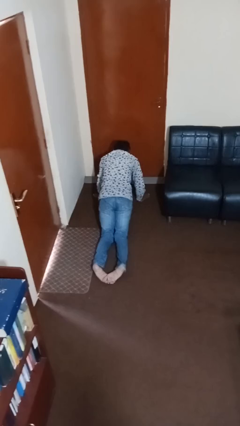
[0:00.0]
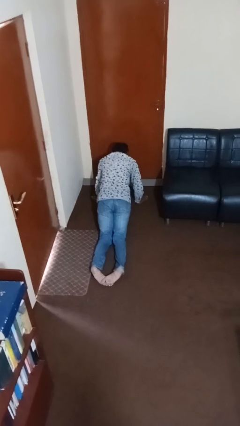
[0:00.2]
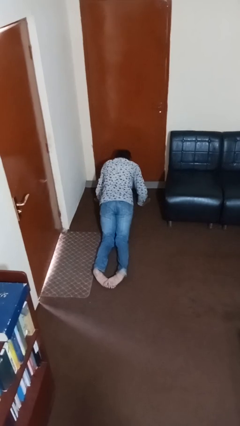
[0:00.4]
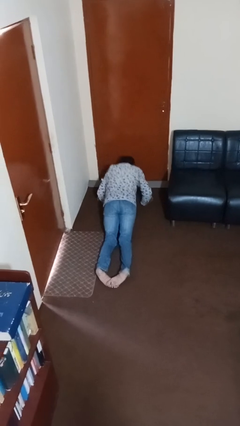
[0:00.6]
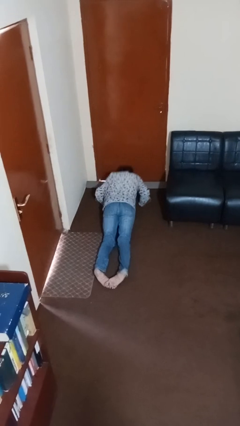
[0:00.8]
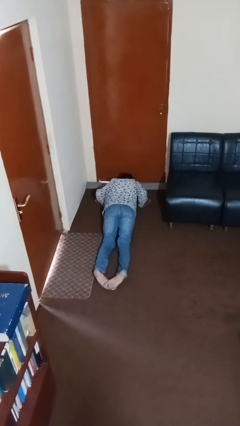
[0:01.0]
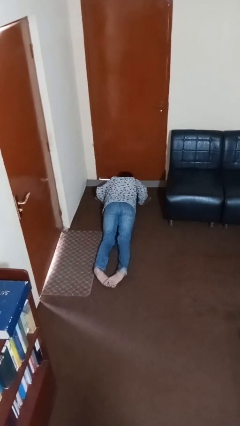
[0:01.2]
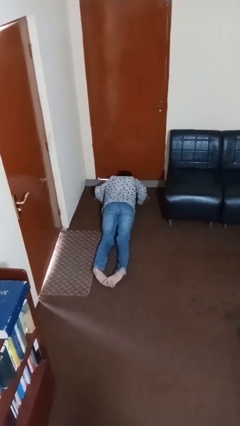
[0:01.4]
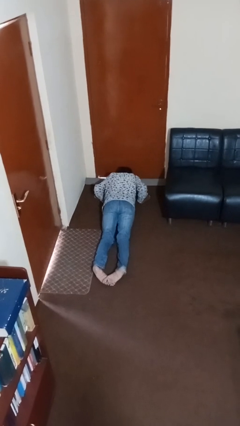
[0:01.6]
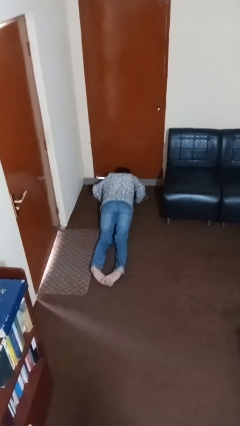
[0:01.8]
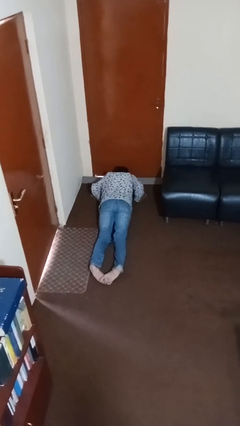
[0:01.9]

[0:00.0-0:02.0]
person exercises with pushup

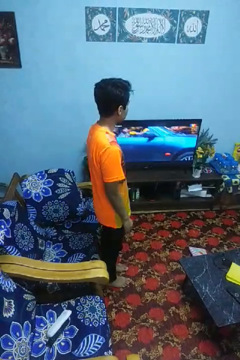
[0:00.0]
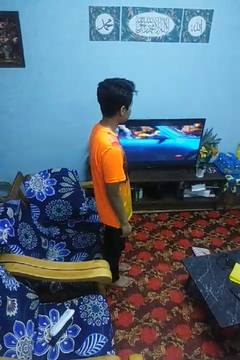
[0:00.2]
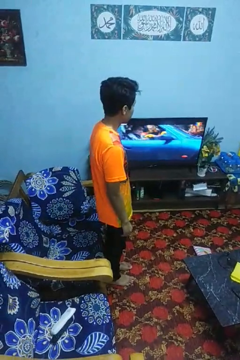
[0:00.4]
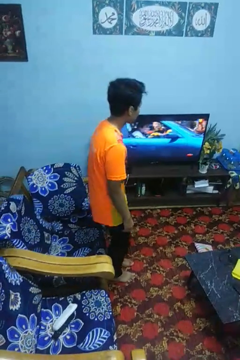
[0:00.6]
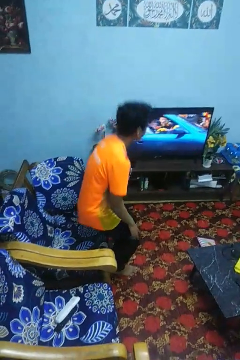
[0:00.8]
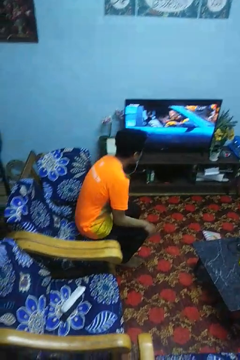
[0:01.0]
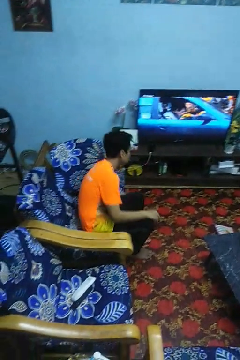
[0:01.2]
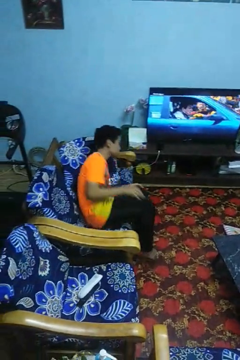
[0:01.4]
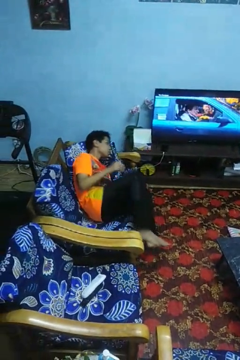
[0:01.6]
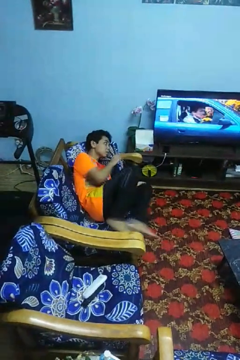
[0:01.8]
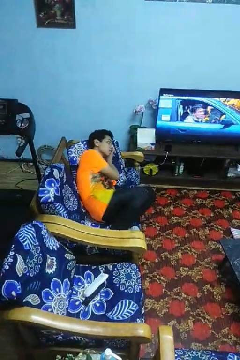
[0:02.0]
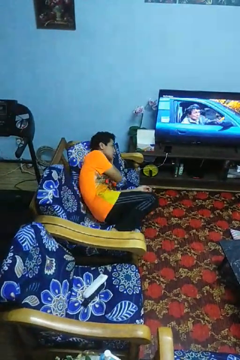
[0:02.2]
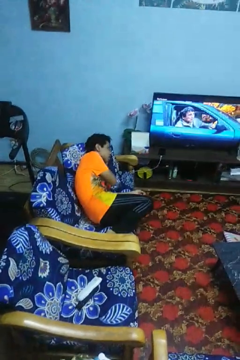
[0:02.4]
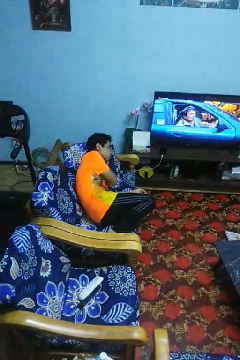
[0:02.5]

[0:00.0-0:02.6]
person lies down on couch

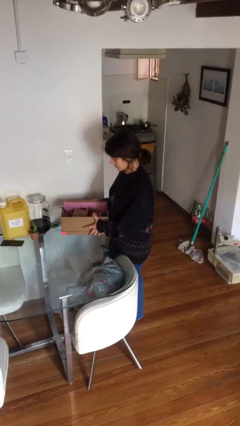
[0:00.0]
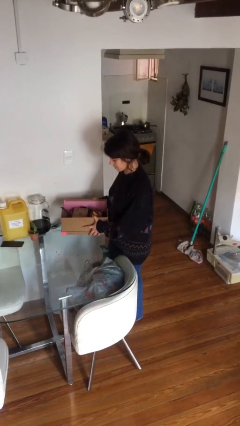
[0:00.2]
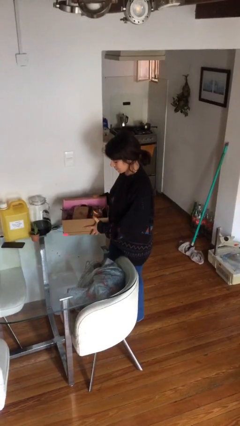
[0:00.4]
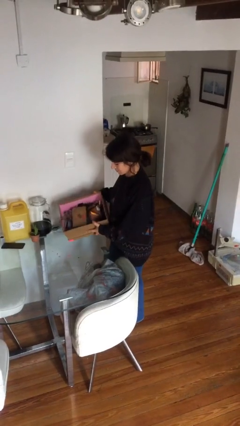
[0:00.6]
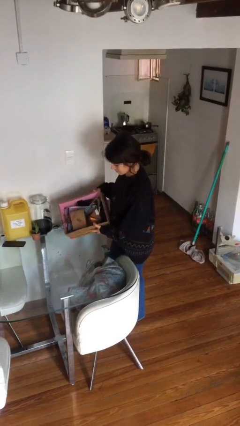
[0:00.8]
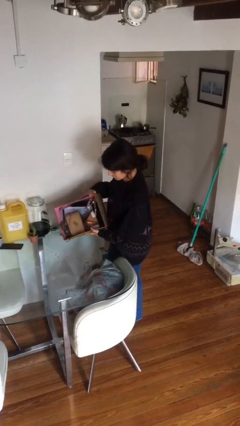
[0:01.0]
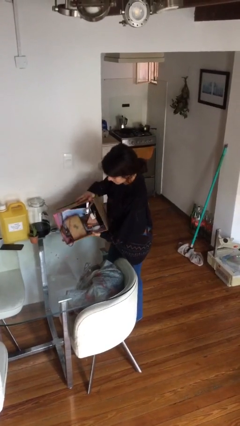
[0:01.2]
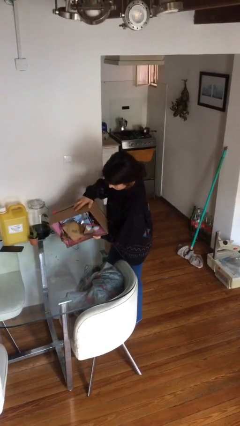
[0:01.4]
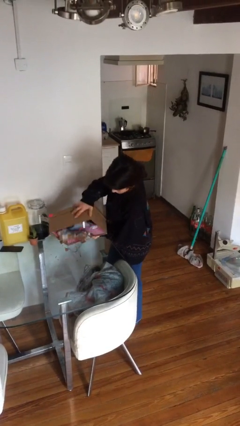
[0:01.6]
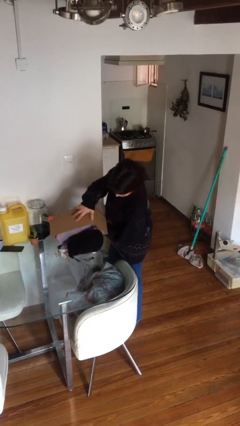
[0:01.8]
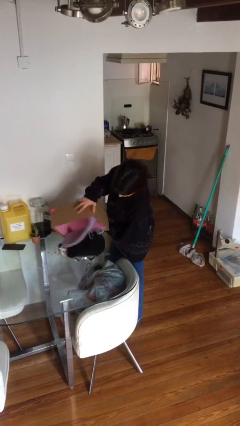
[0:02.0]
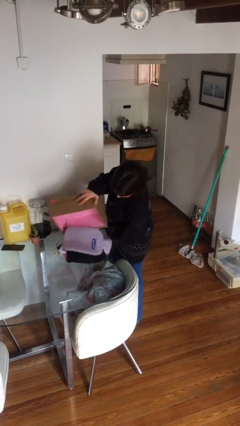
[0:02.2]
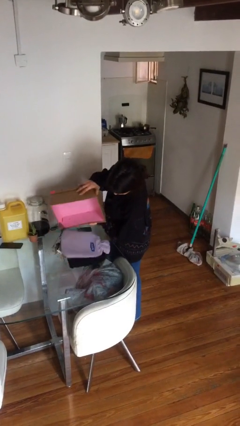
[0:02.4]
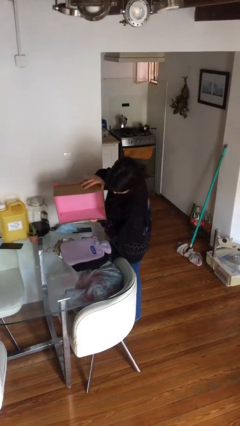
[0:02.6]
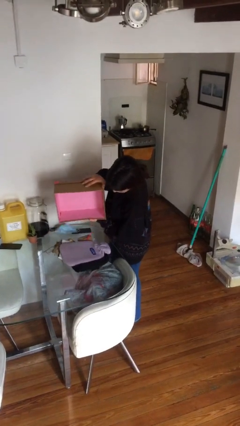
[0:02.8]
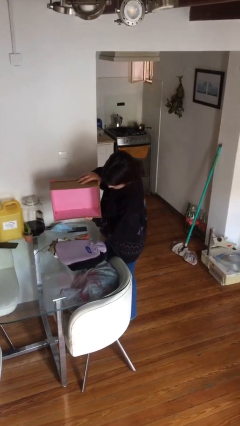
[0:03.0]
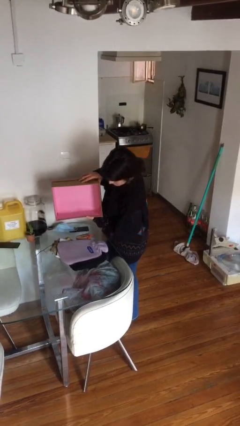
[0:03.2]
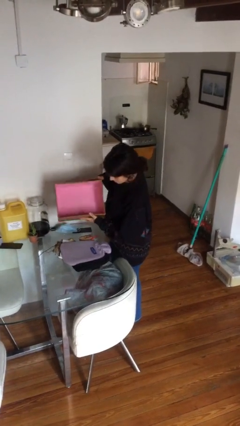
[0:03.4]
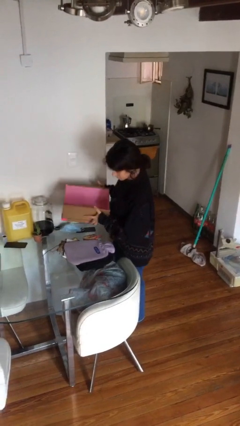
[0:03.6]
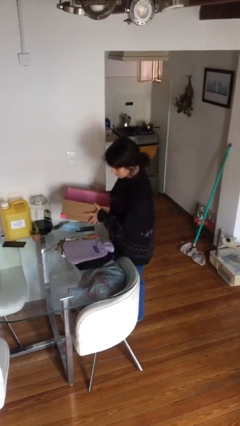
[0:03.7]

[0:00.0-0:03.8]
person unloads box onto table

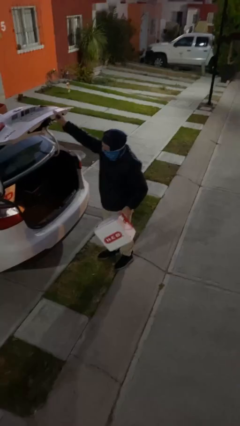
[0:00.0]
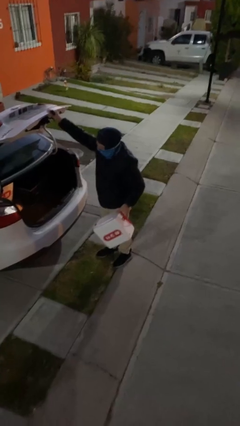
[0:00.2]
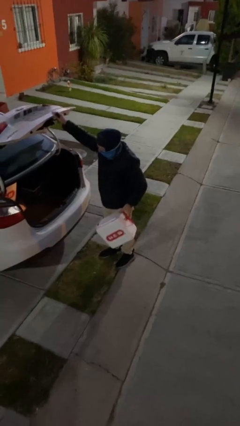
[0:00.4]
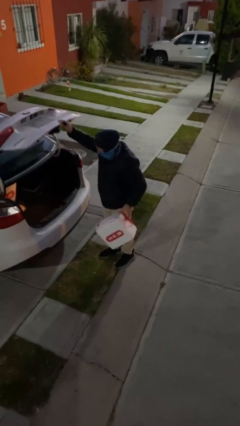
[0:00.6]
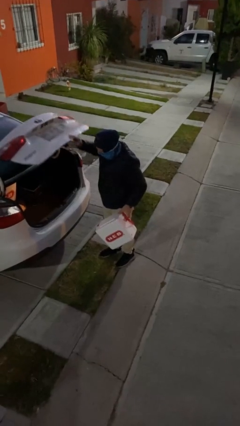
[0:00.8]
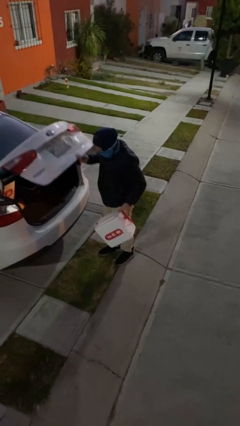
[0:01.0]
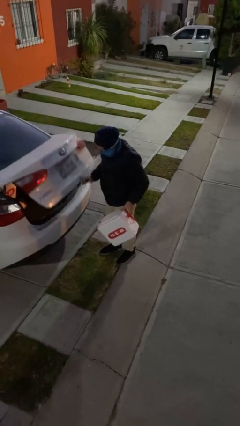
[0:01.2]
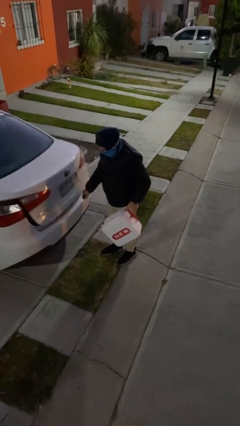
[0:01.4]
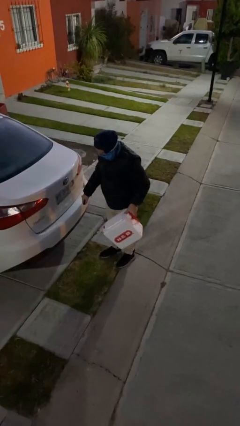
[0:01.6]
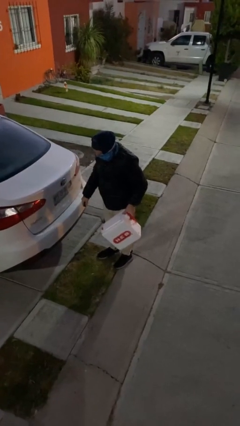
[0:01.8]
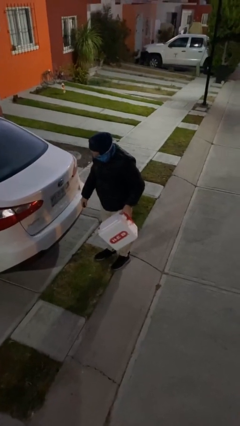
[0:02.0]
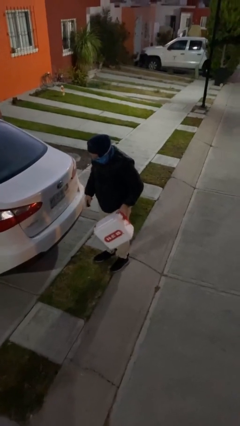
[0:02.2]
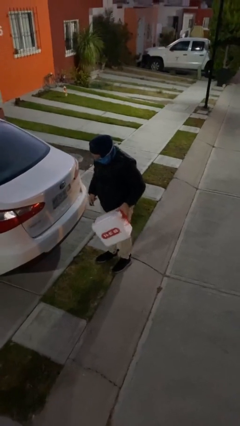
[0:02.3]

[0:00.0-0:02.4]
person closes car trunk

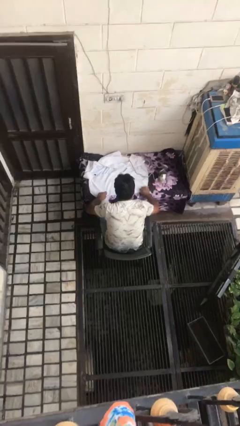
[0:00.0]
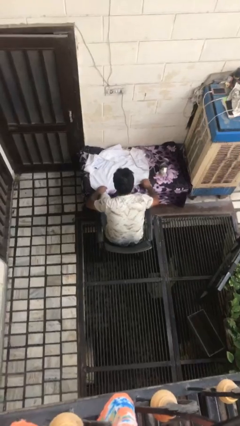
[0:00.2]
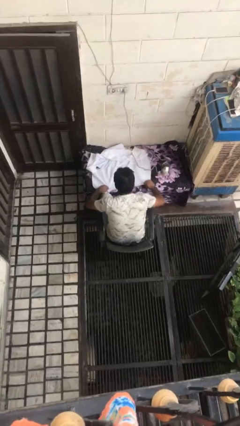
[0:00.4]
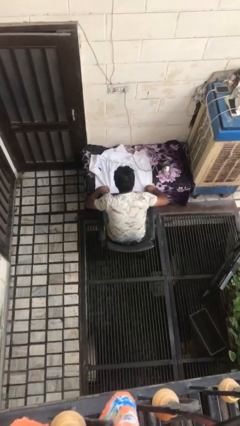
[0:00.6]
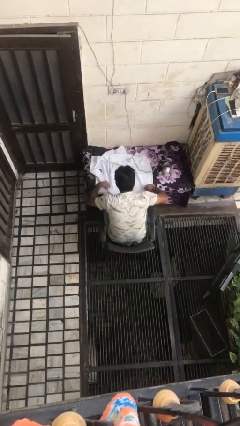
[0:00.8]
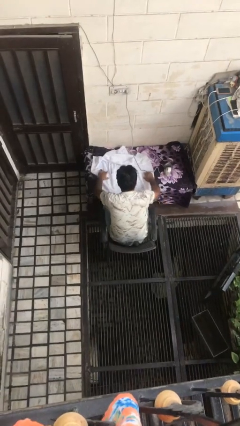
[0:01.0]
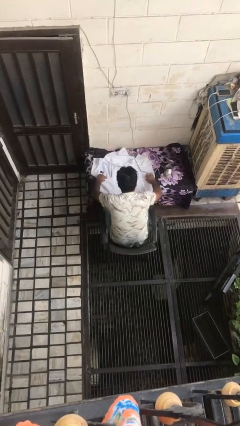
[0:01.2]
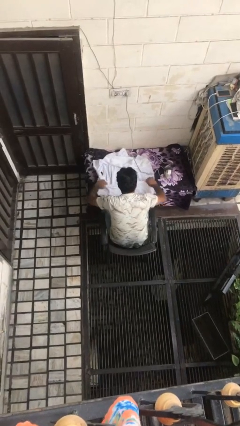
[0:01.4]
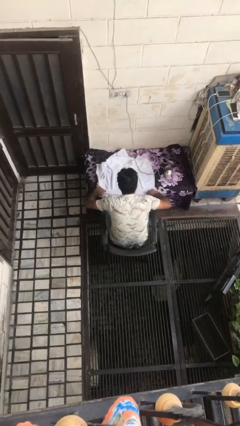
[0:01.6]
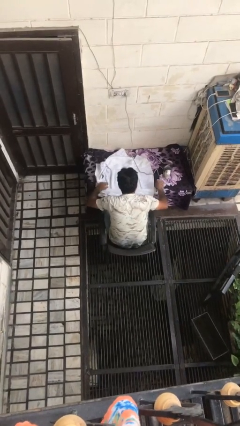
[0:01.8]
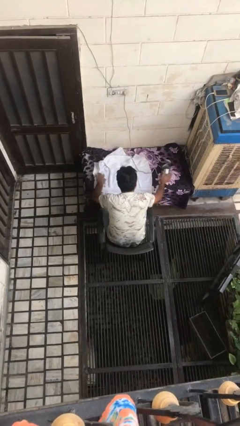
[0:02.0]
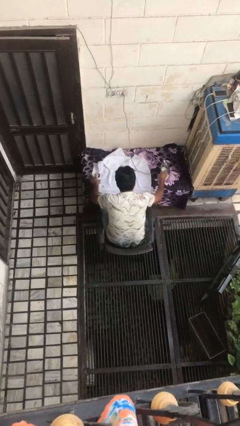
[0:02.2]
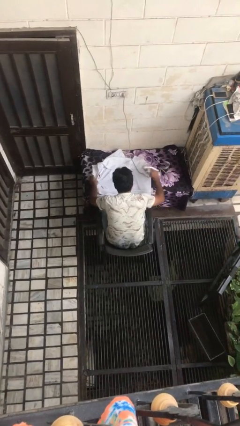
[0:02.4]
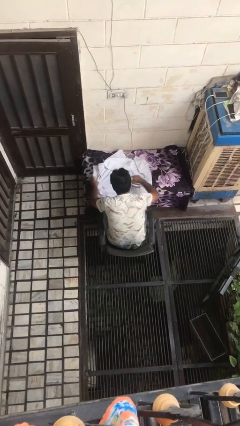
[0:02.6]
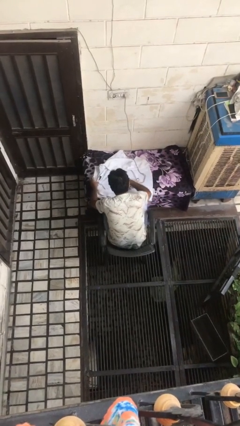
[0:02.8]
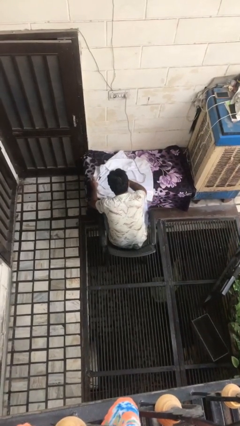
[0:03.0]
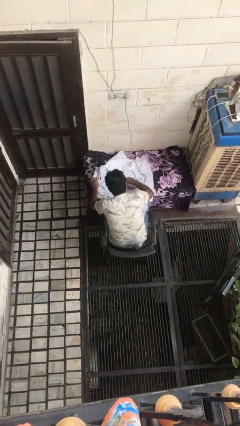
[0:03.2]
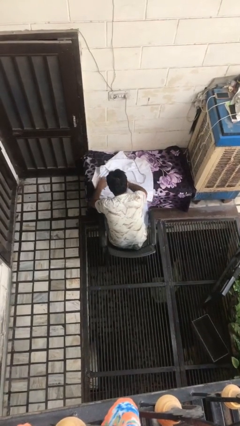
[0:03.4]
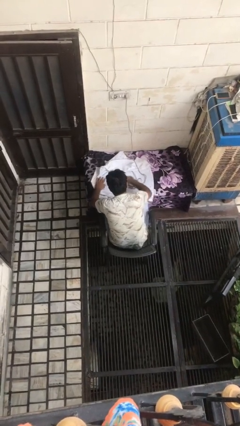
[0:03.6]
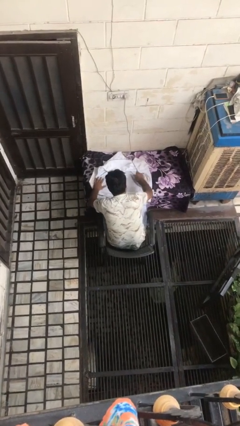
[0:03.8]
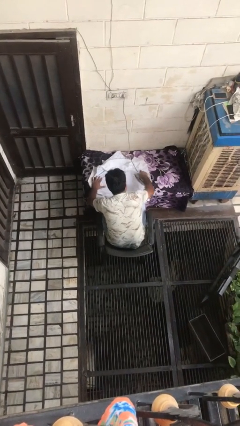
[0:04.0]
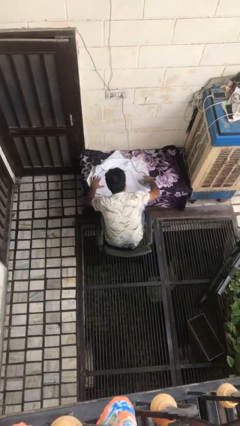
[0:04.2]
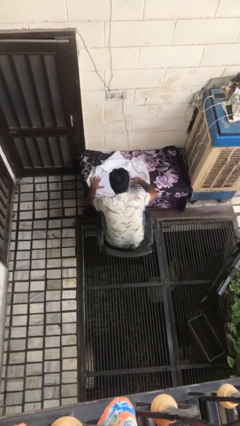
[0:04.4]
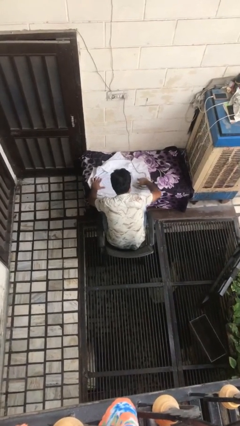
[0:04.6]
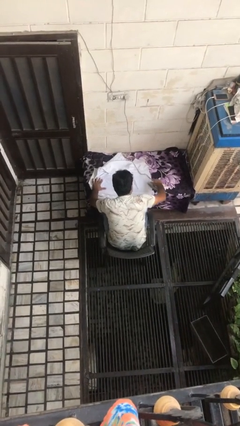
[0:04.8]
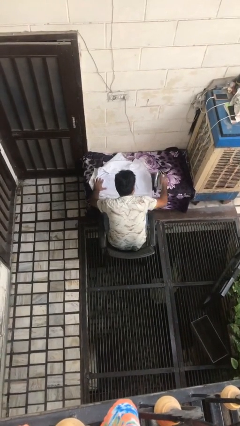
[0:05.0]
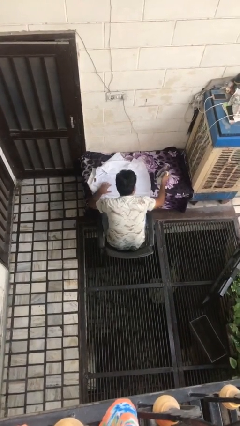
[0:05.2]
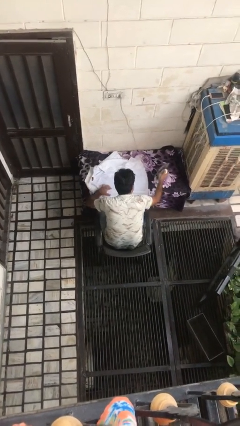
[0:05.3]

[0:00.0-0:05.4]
person irons clothes

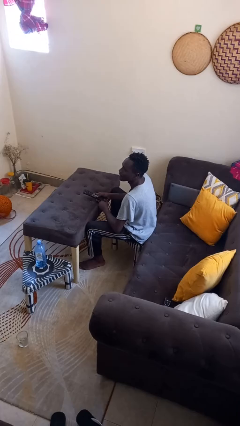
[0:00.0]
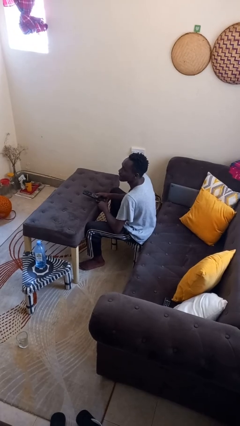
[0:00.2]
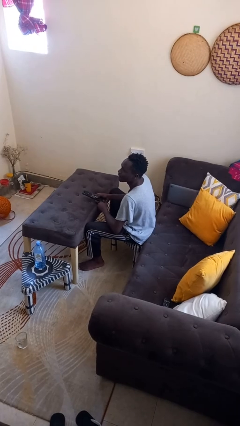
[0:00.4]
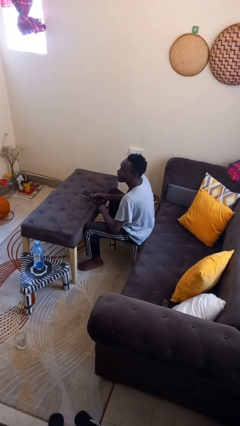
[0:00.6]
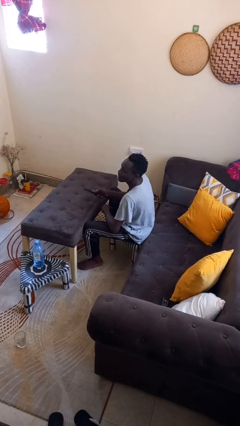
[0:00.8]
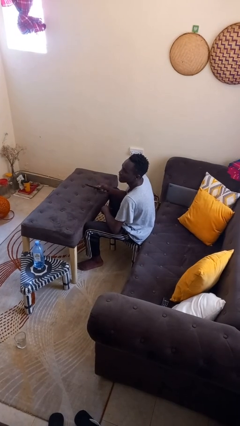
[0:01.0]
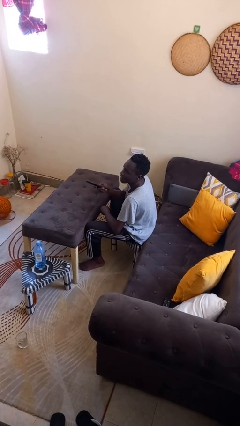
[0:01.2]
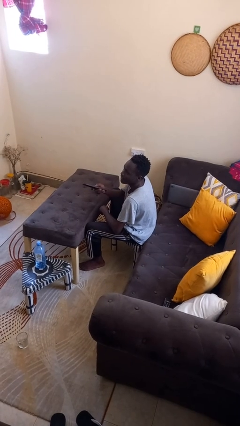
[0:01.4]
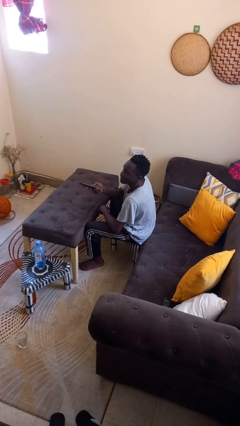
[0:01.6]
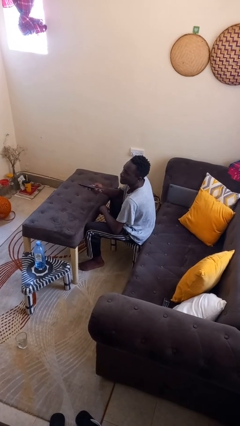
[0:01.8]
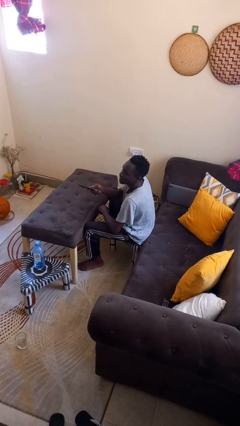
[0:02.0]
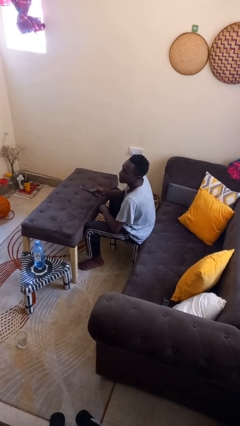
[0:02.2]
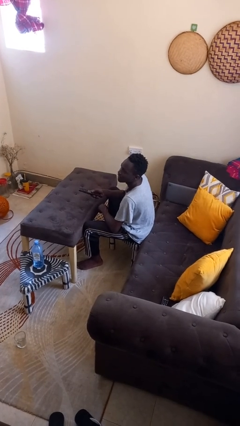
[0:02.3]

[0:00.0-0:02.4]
person uses television remote
